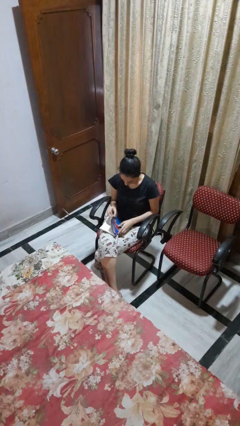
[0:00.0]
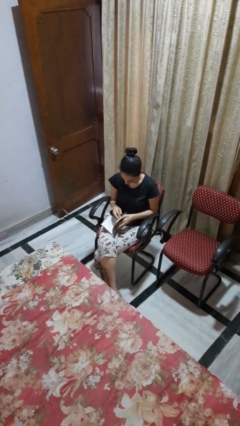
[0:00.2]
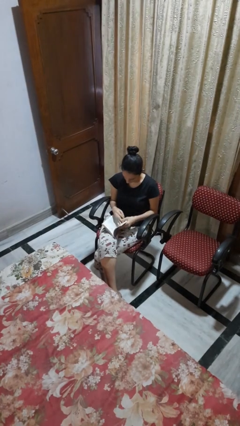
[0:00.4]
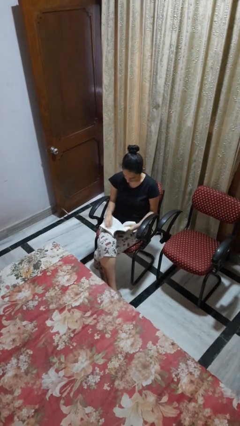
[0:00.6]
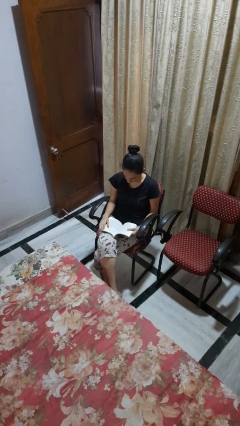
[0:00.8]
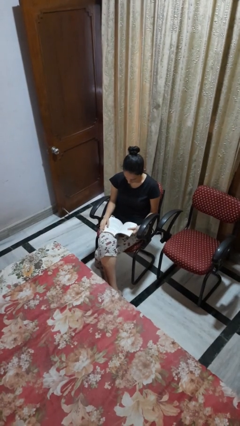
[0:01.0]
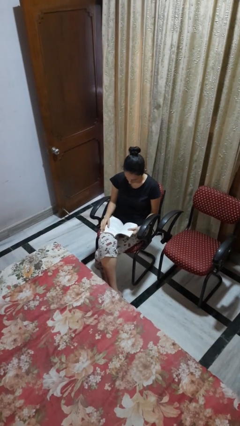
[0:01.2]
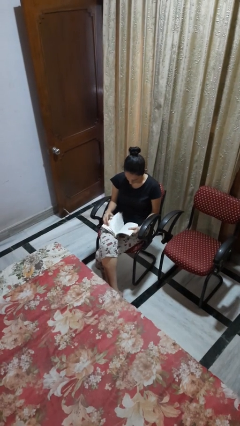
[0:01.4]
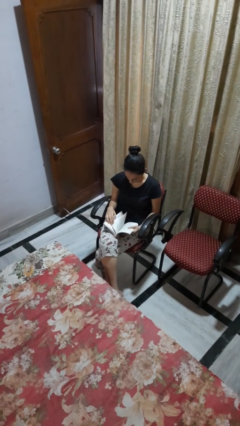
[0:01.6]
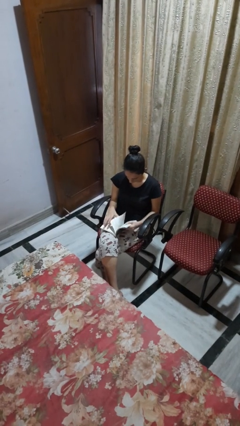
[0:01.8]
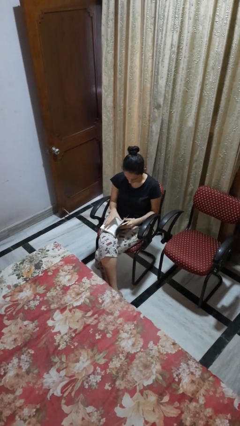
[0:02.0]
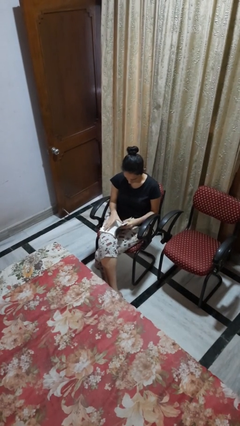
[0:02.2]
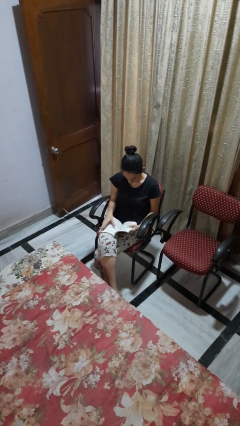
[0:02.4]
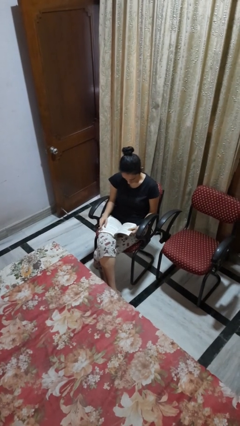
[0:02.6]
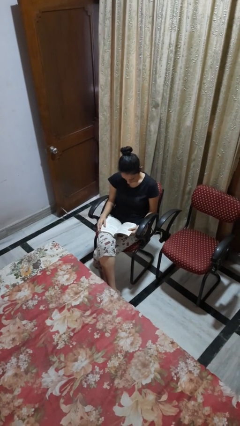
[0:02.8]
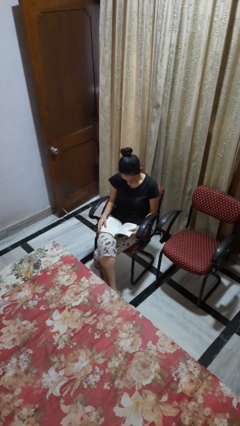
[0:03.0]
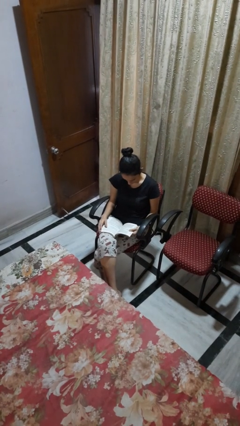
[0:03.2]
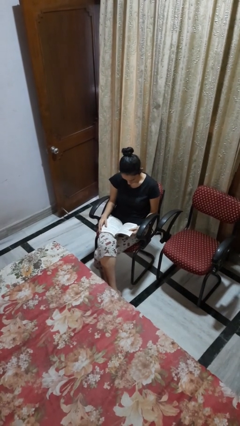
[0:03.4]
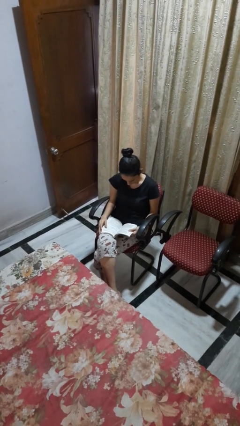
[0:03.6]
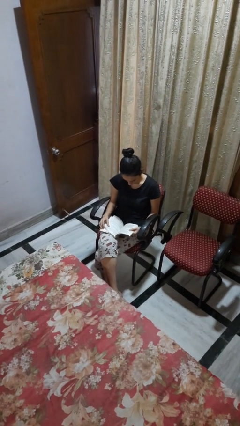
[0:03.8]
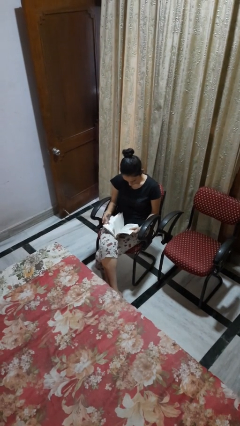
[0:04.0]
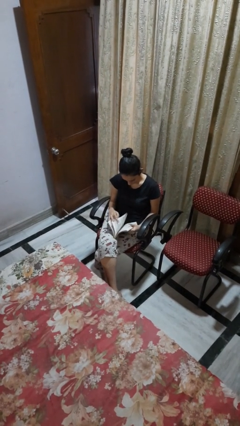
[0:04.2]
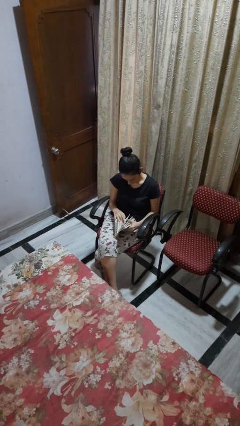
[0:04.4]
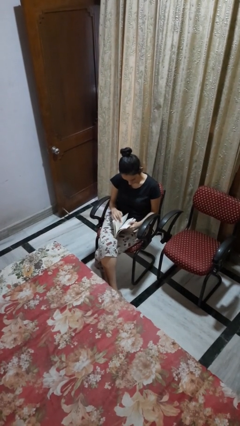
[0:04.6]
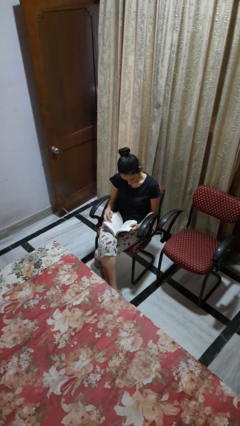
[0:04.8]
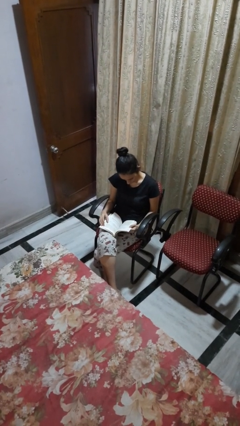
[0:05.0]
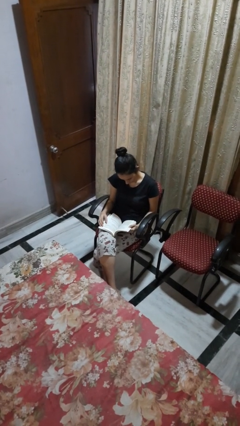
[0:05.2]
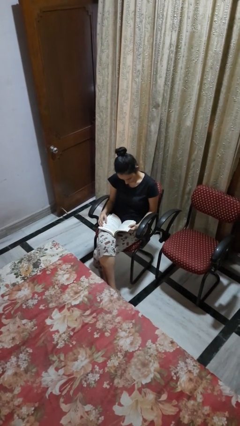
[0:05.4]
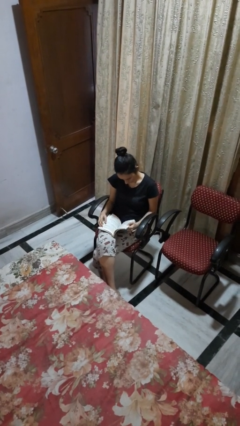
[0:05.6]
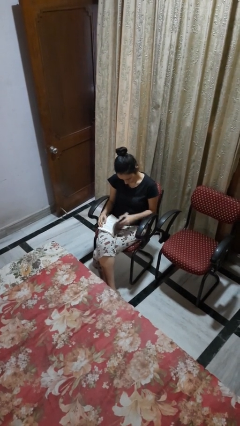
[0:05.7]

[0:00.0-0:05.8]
person reads book

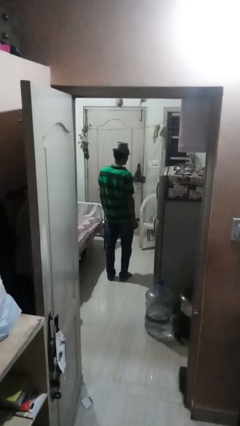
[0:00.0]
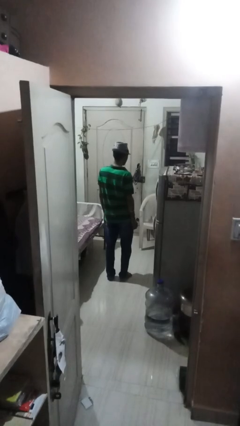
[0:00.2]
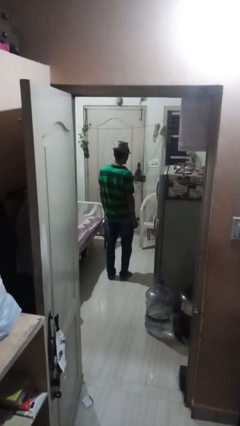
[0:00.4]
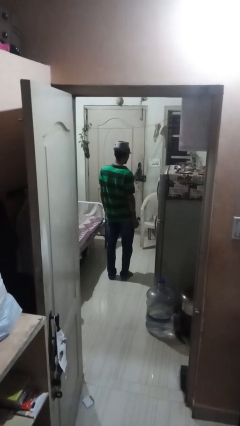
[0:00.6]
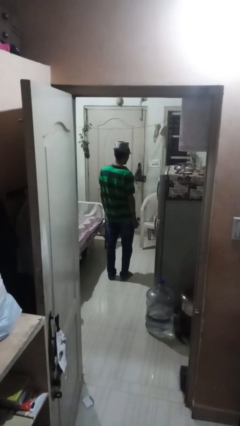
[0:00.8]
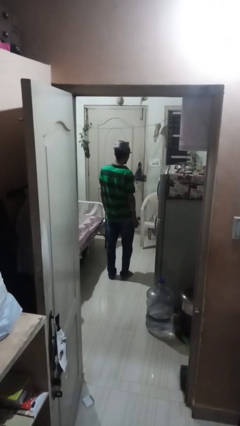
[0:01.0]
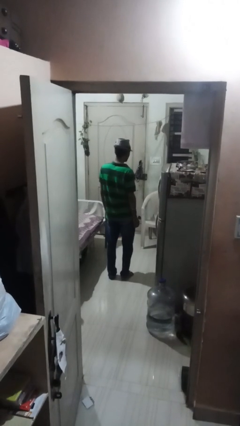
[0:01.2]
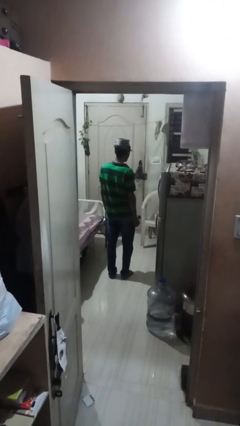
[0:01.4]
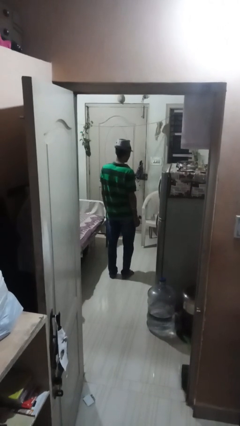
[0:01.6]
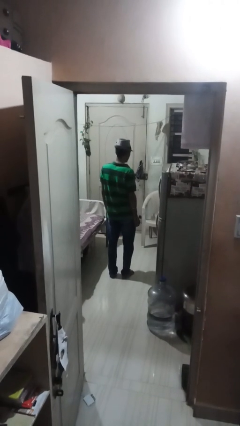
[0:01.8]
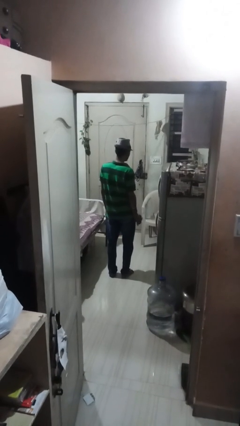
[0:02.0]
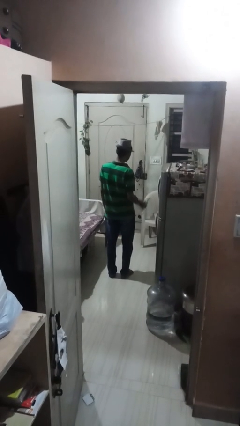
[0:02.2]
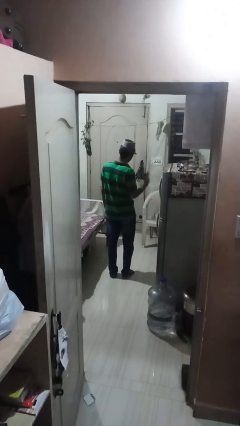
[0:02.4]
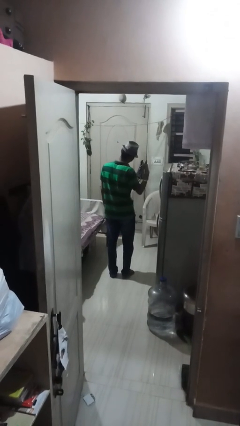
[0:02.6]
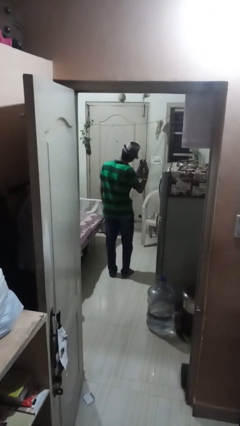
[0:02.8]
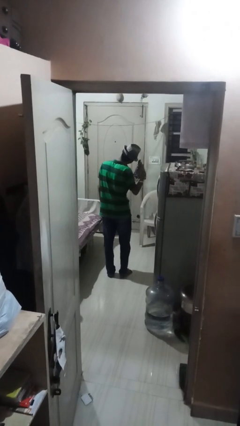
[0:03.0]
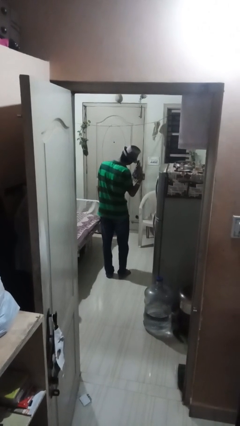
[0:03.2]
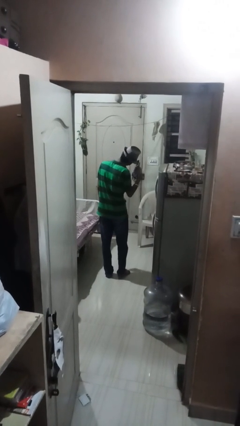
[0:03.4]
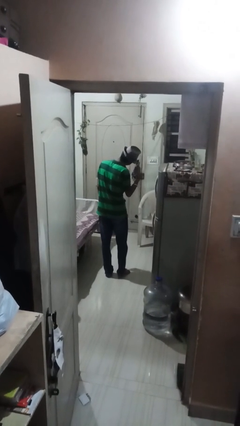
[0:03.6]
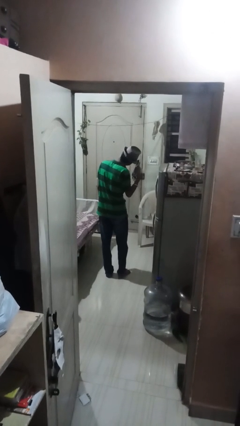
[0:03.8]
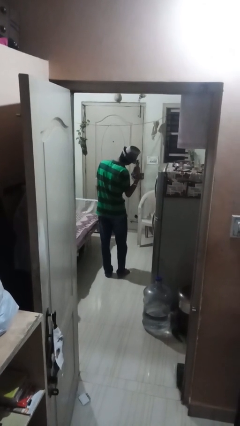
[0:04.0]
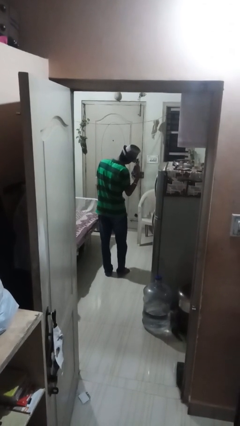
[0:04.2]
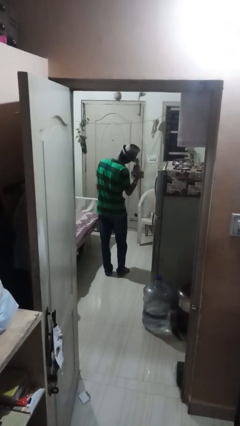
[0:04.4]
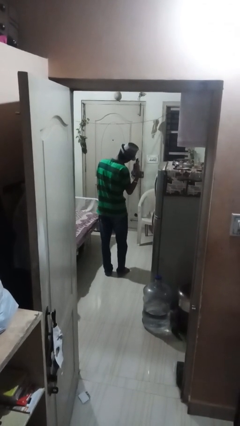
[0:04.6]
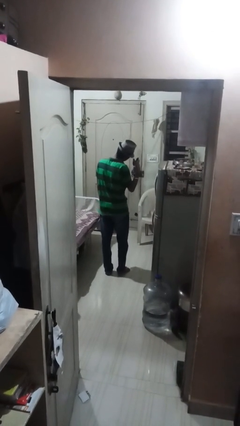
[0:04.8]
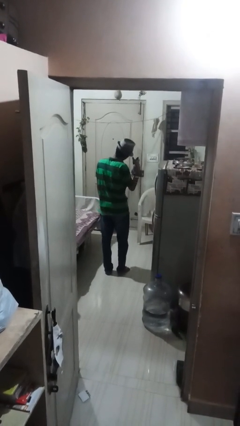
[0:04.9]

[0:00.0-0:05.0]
person gestures call me

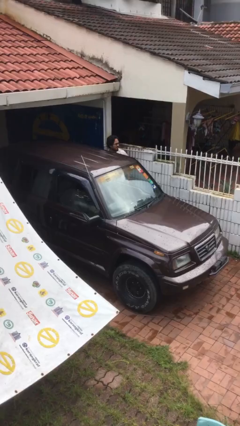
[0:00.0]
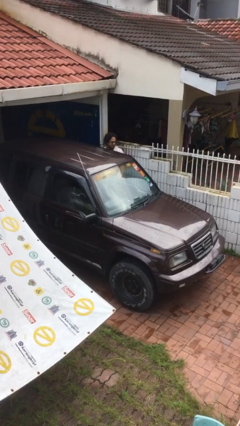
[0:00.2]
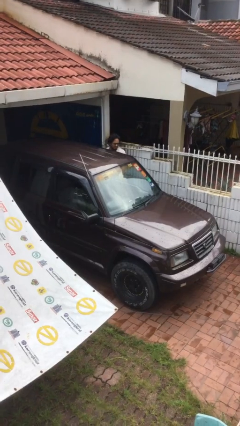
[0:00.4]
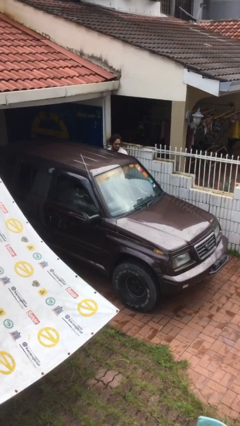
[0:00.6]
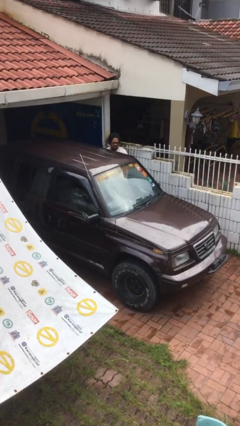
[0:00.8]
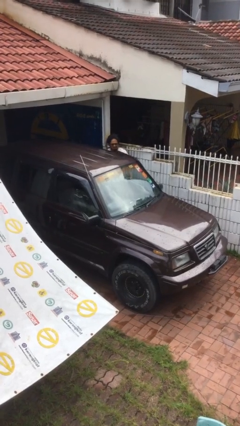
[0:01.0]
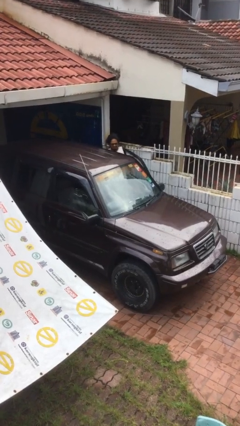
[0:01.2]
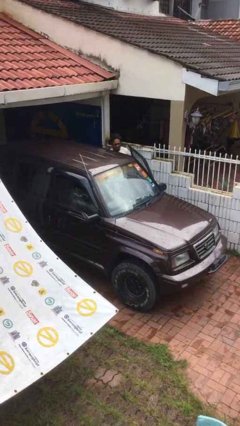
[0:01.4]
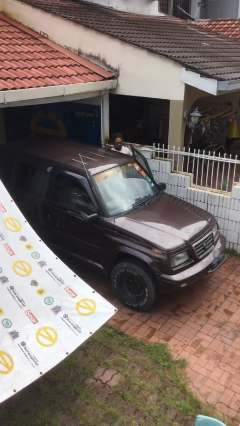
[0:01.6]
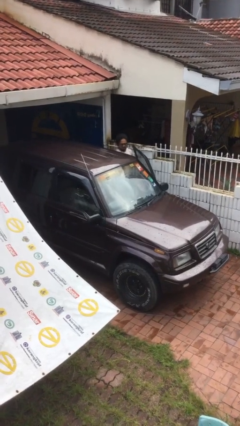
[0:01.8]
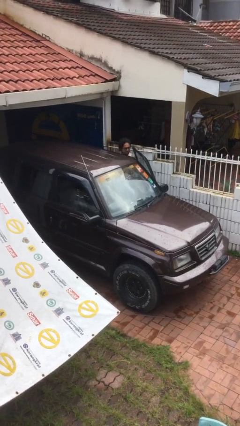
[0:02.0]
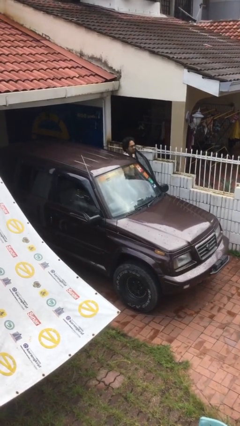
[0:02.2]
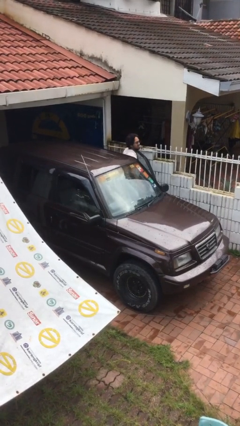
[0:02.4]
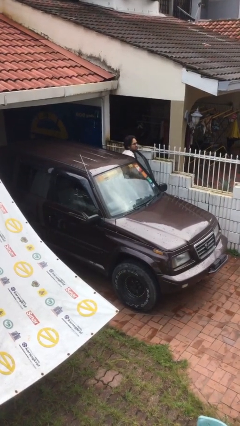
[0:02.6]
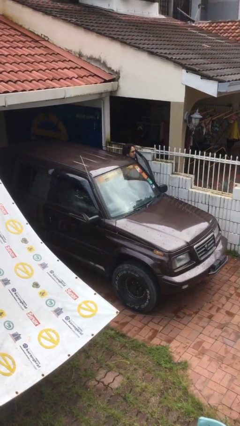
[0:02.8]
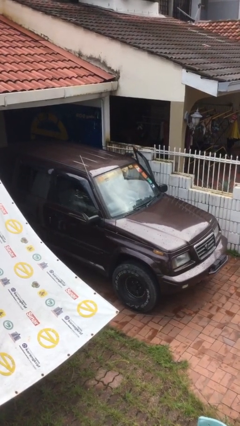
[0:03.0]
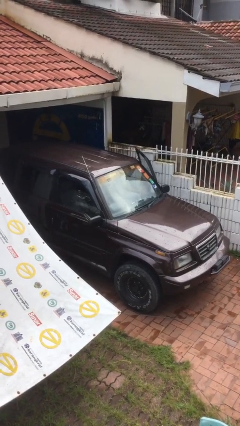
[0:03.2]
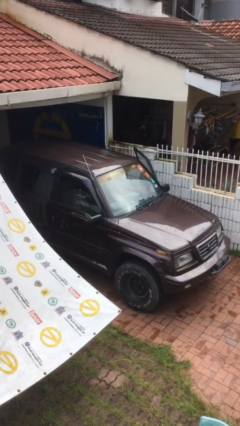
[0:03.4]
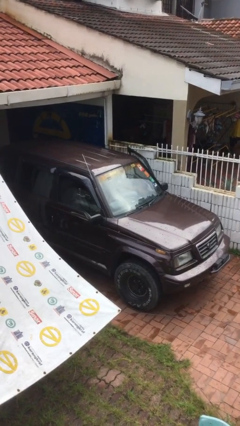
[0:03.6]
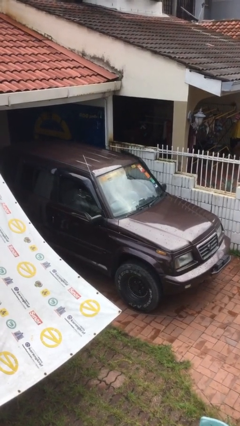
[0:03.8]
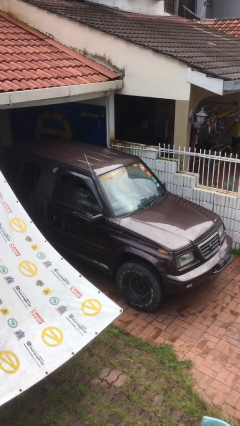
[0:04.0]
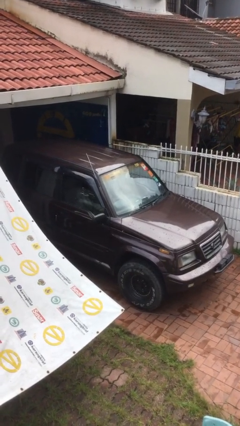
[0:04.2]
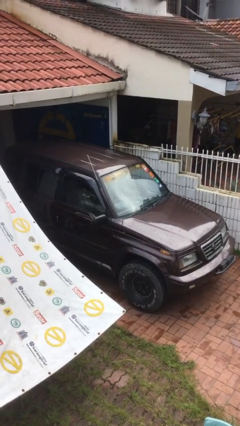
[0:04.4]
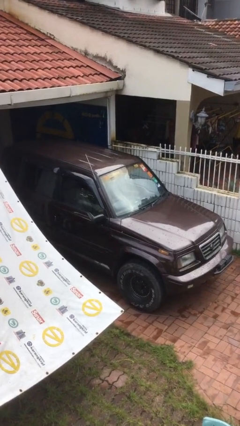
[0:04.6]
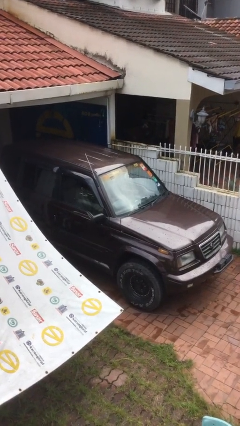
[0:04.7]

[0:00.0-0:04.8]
car picks up person

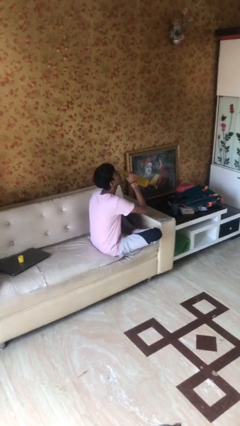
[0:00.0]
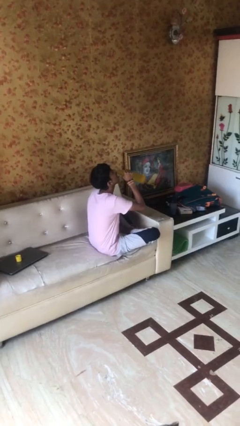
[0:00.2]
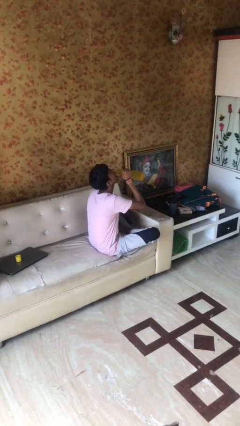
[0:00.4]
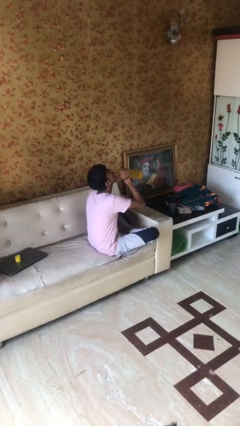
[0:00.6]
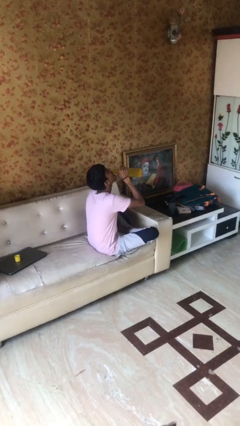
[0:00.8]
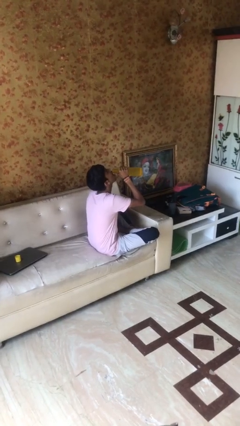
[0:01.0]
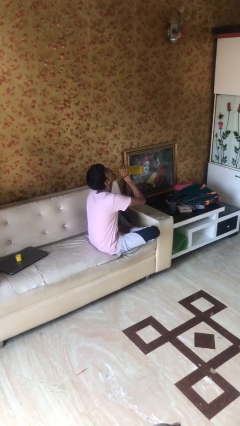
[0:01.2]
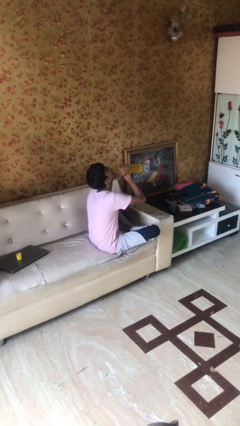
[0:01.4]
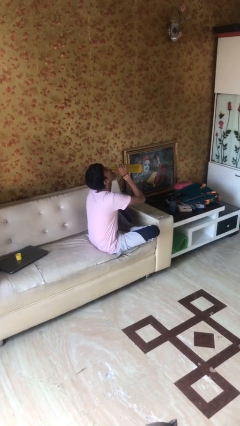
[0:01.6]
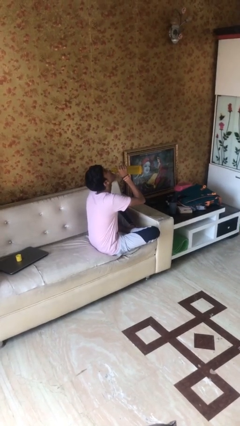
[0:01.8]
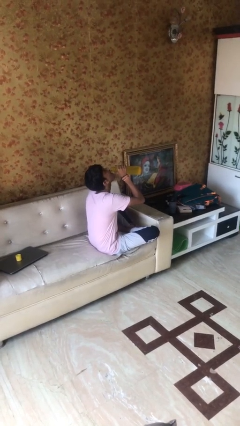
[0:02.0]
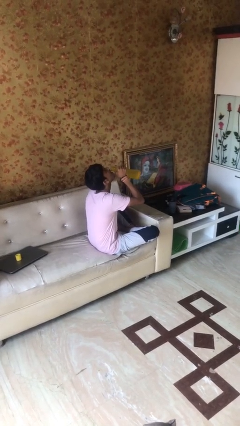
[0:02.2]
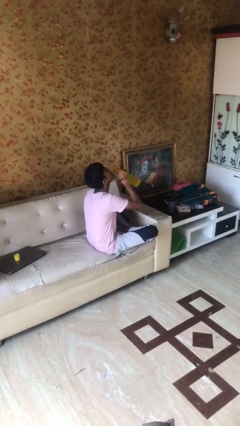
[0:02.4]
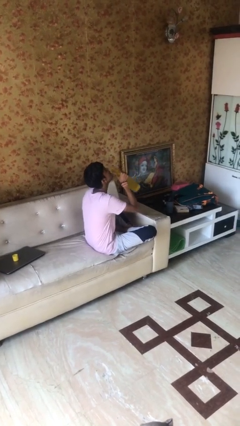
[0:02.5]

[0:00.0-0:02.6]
person drinks from bottle
